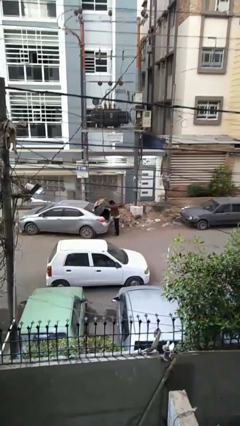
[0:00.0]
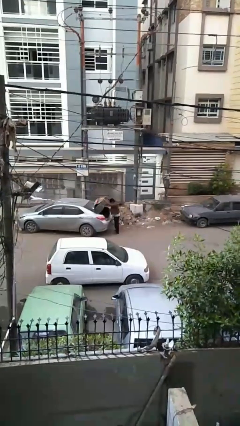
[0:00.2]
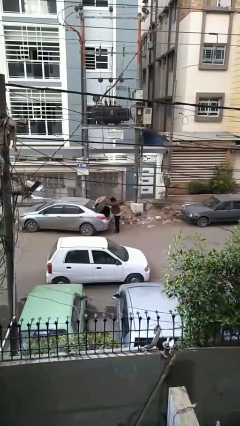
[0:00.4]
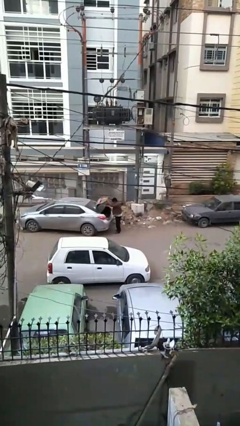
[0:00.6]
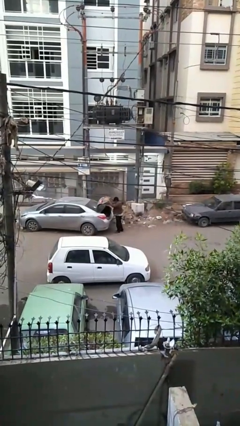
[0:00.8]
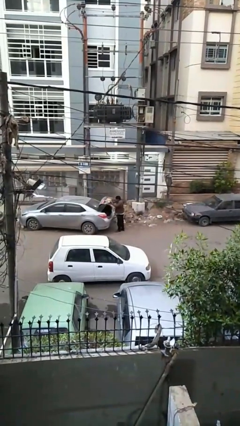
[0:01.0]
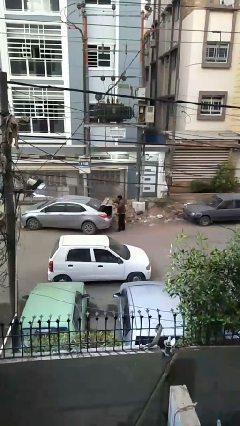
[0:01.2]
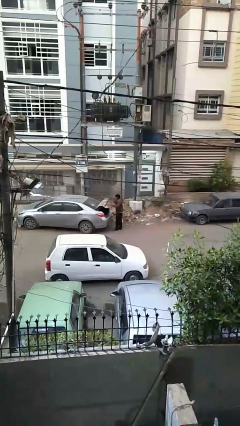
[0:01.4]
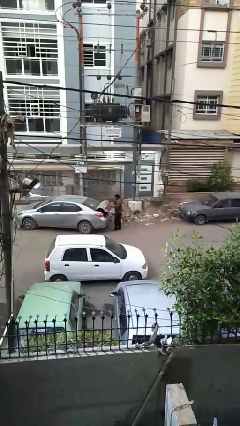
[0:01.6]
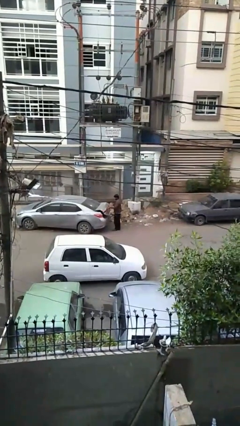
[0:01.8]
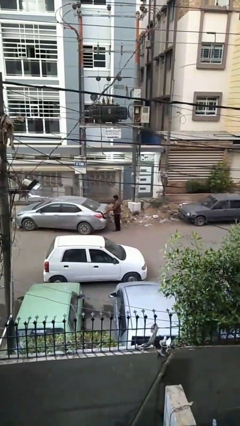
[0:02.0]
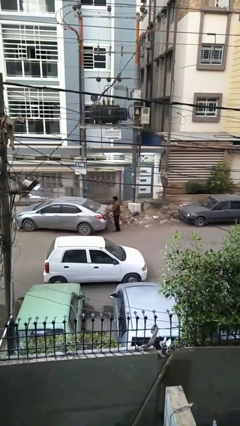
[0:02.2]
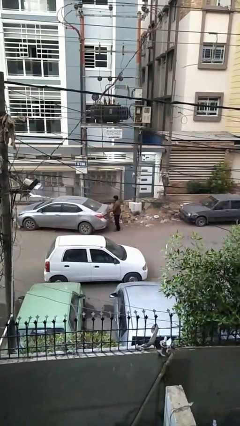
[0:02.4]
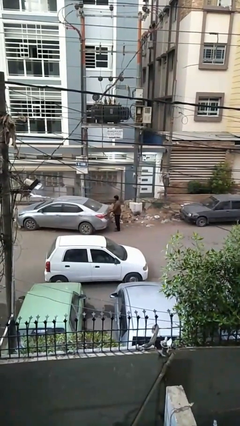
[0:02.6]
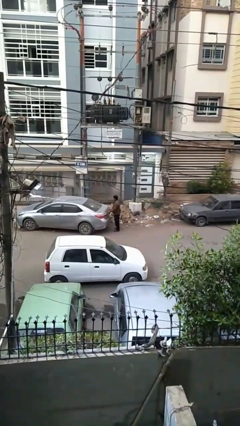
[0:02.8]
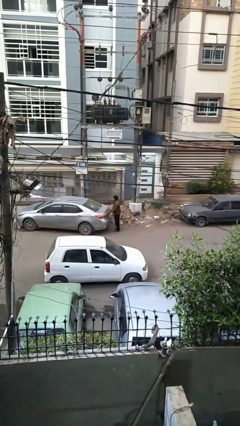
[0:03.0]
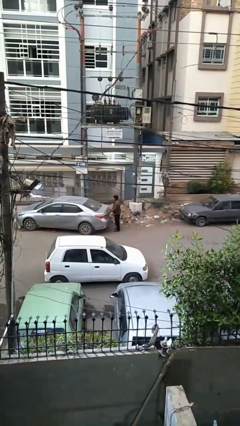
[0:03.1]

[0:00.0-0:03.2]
person closes car trunk

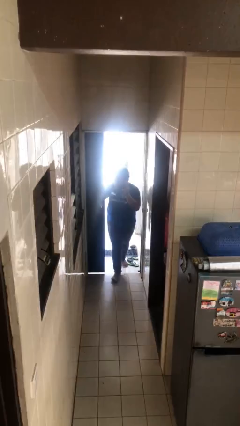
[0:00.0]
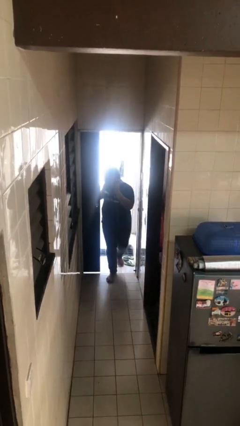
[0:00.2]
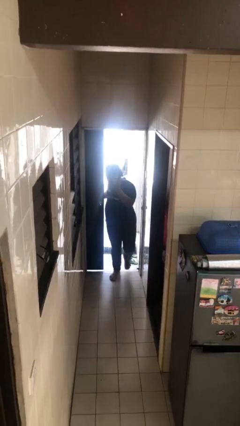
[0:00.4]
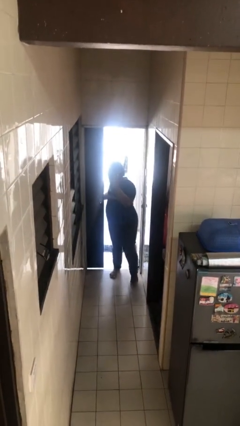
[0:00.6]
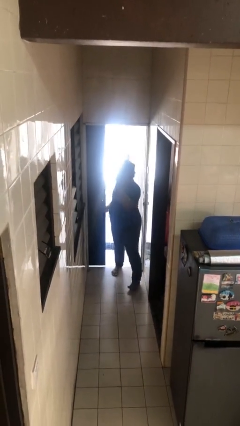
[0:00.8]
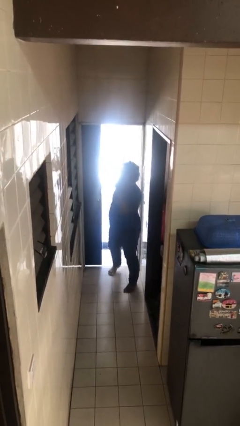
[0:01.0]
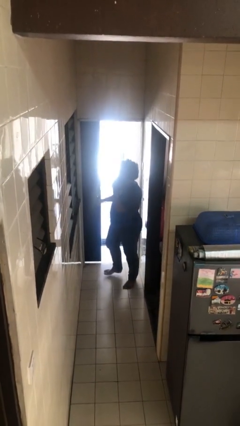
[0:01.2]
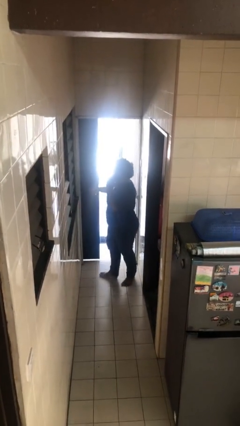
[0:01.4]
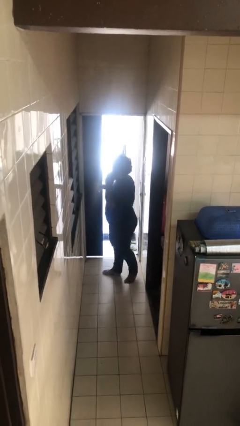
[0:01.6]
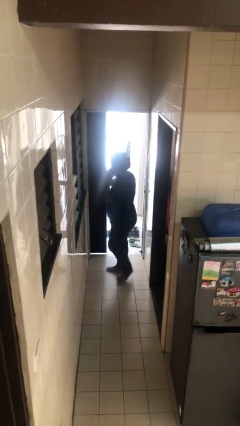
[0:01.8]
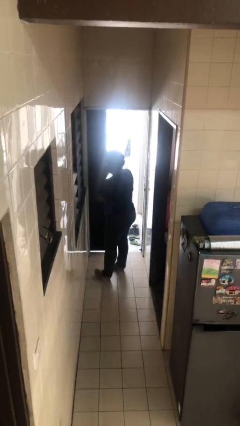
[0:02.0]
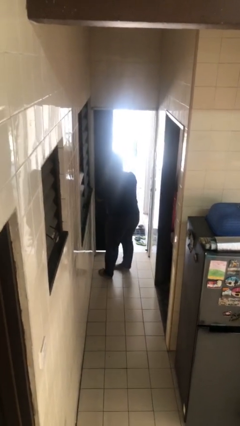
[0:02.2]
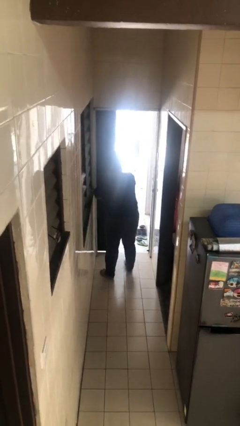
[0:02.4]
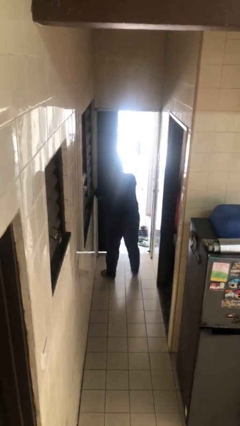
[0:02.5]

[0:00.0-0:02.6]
person enters scene through structure

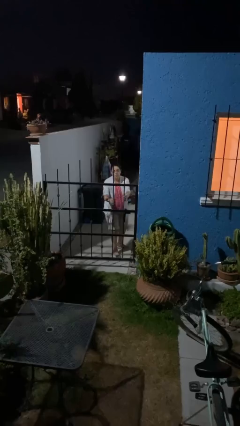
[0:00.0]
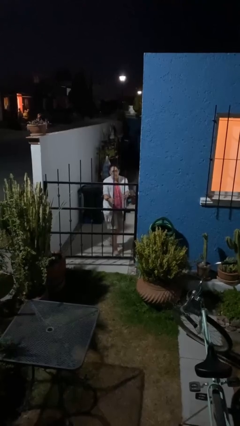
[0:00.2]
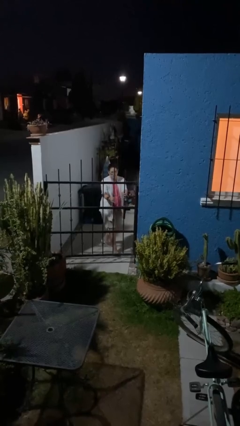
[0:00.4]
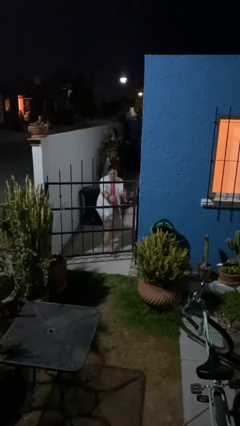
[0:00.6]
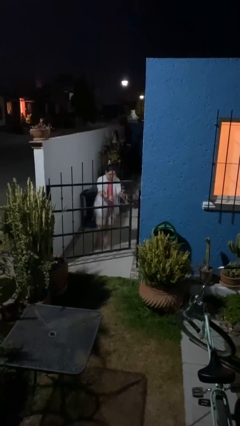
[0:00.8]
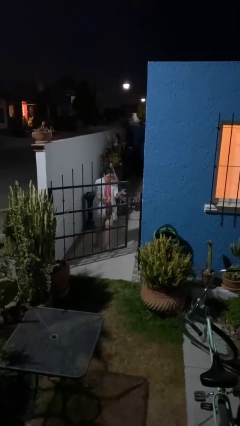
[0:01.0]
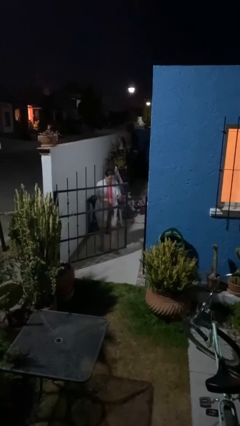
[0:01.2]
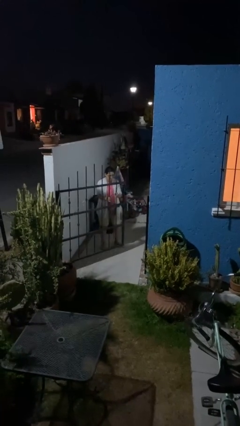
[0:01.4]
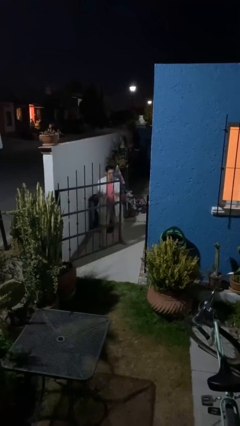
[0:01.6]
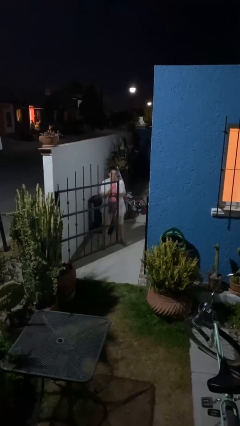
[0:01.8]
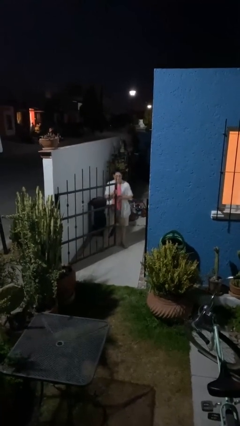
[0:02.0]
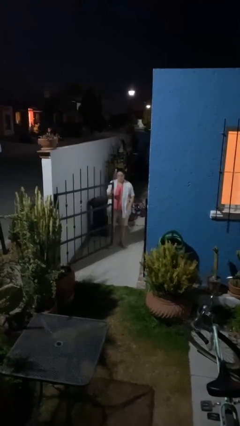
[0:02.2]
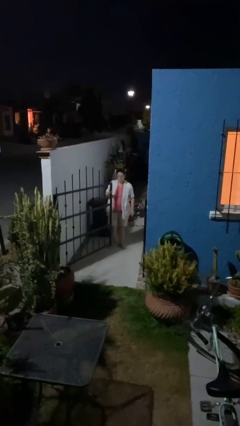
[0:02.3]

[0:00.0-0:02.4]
person opens facility door

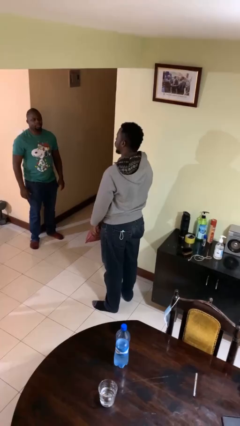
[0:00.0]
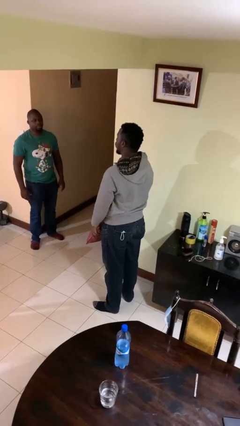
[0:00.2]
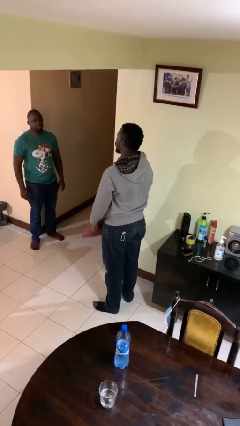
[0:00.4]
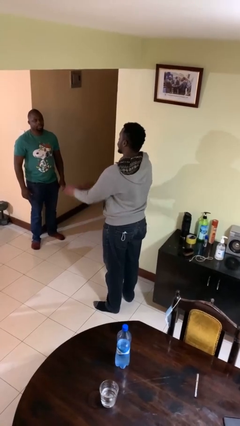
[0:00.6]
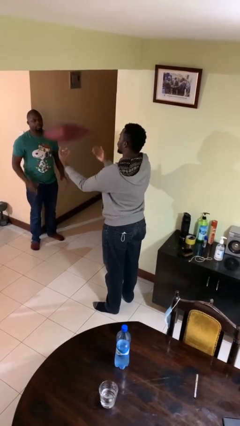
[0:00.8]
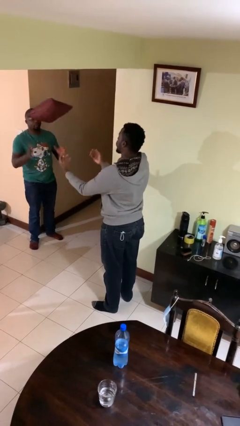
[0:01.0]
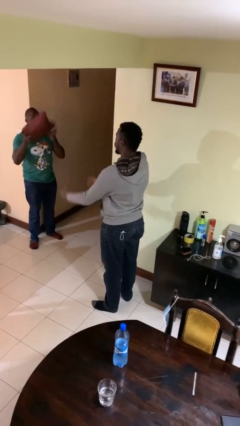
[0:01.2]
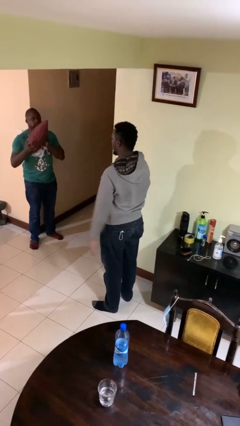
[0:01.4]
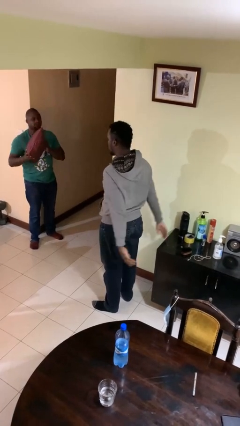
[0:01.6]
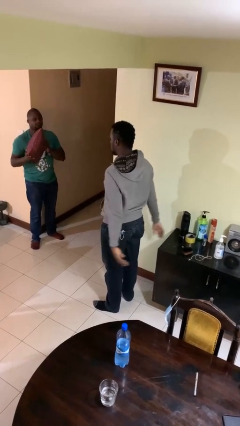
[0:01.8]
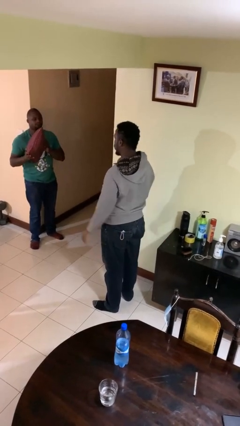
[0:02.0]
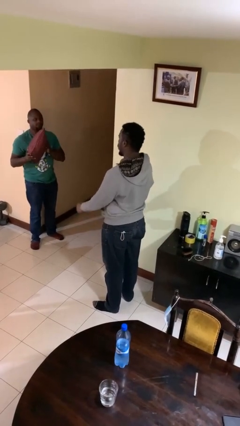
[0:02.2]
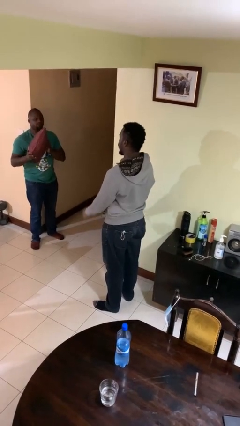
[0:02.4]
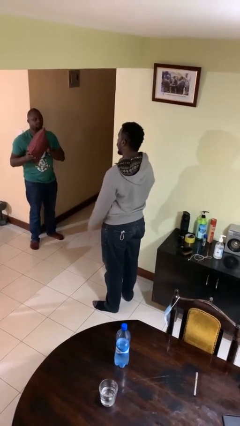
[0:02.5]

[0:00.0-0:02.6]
person throws object to person

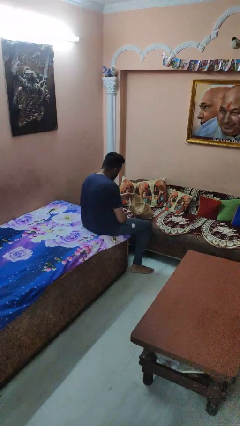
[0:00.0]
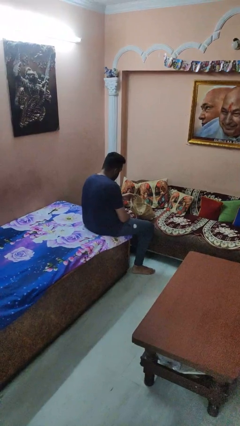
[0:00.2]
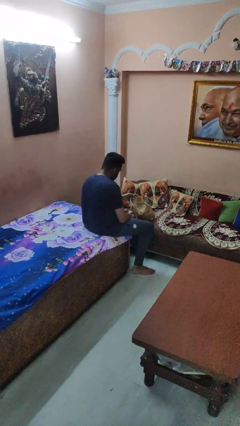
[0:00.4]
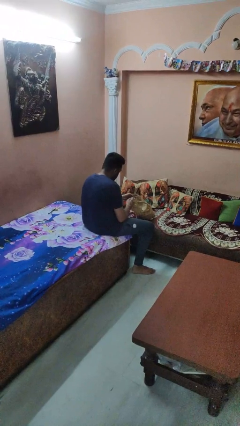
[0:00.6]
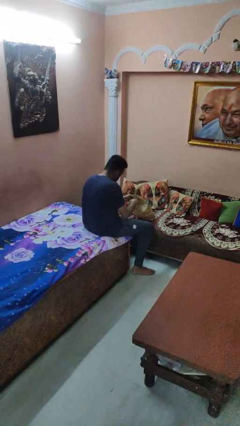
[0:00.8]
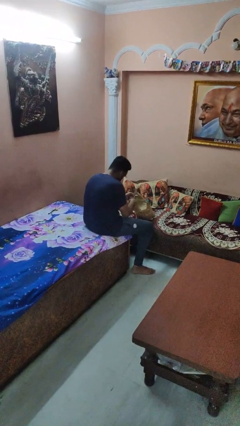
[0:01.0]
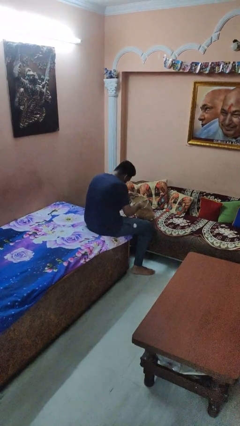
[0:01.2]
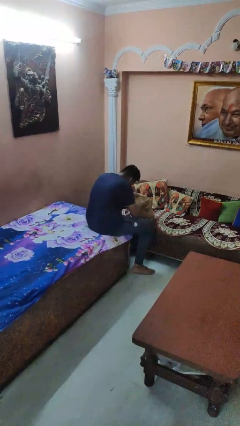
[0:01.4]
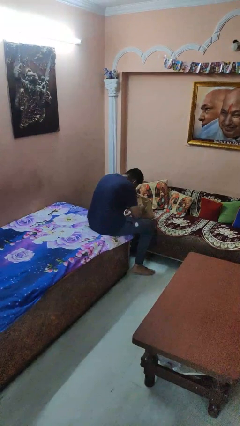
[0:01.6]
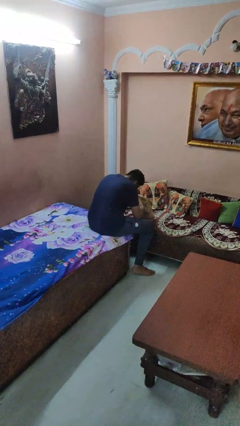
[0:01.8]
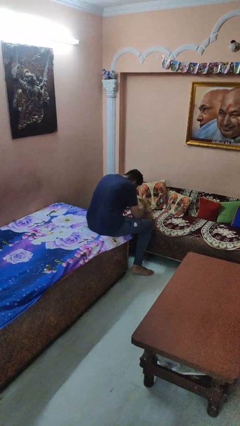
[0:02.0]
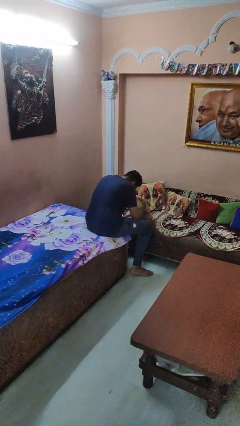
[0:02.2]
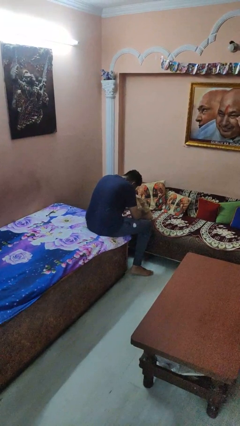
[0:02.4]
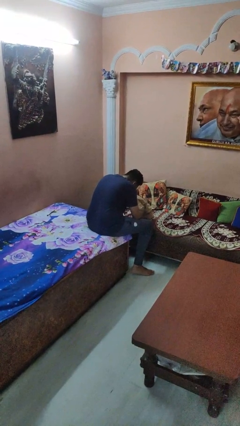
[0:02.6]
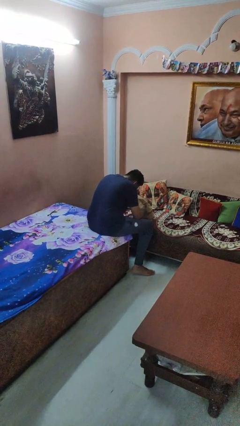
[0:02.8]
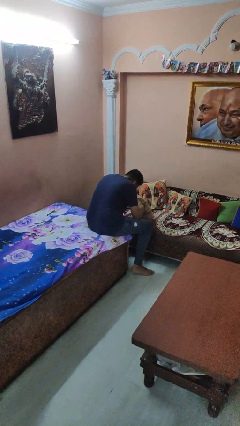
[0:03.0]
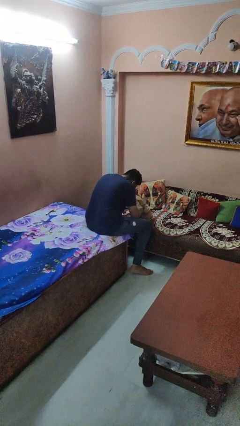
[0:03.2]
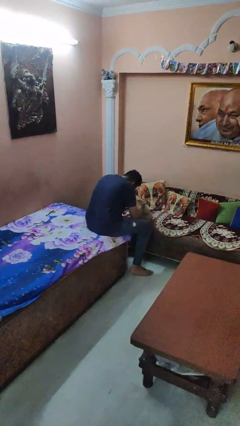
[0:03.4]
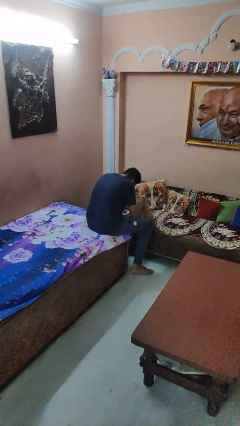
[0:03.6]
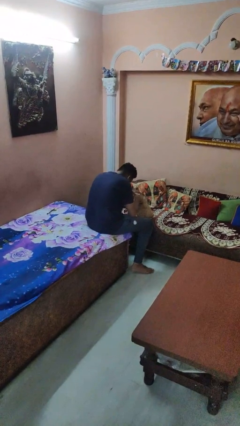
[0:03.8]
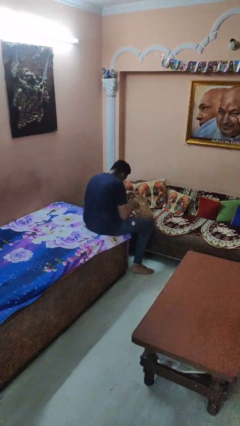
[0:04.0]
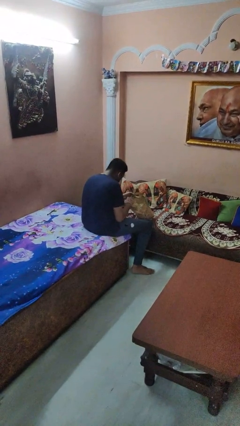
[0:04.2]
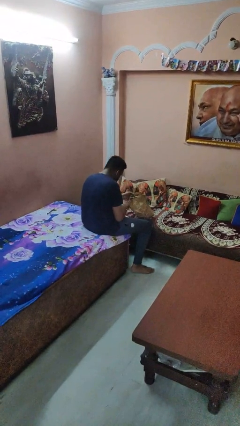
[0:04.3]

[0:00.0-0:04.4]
person searches in bag

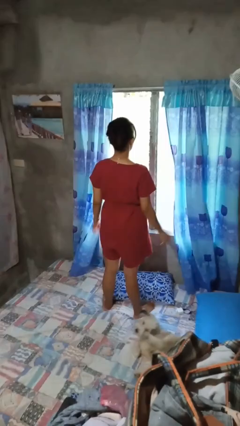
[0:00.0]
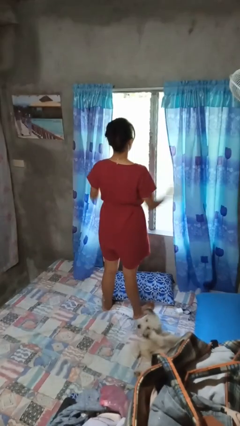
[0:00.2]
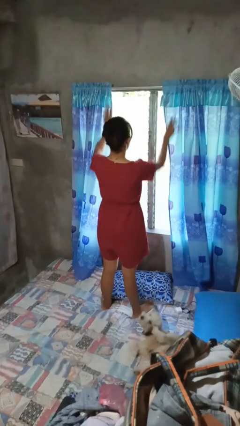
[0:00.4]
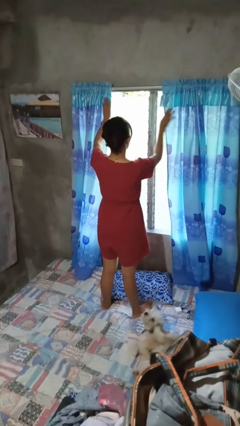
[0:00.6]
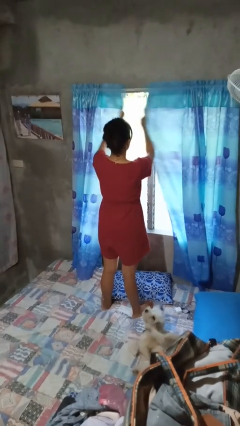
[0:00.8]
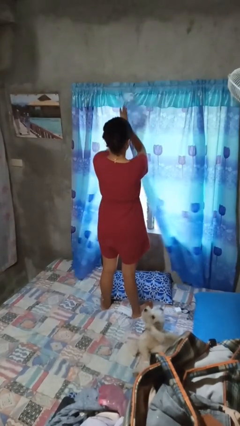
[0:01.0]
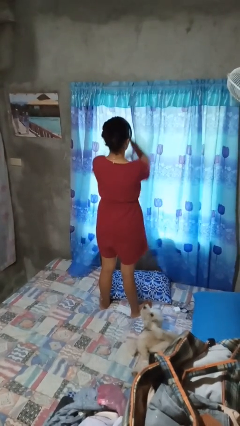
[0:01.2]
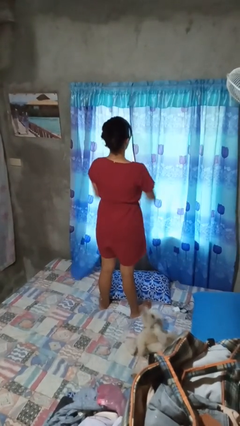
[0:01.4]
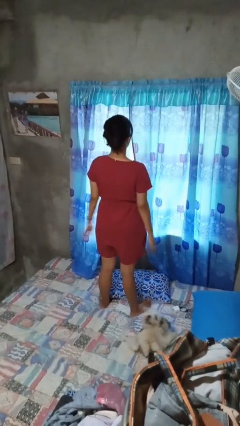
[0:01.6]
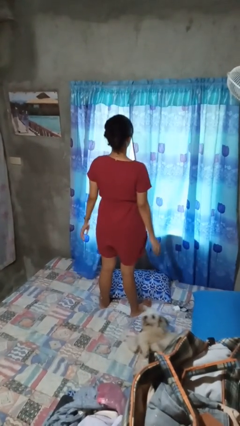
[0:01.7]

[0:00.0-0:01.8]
person closes curtains
